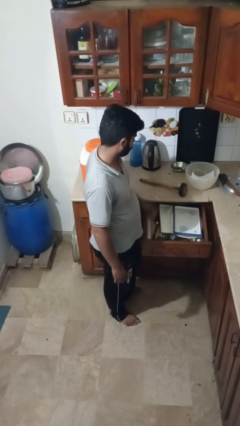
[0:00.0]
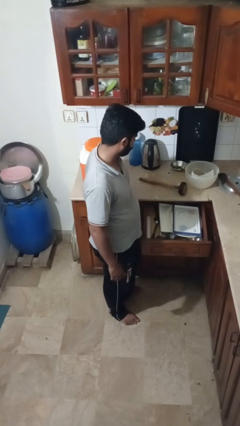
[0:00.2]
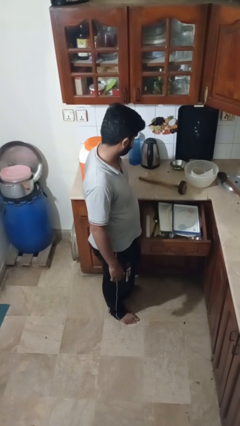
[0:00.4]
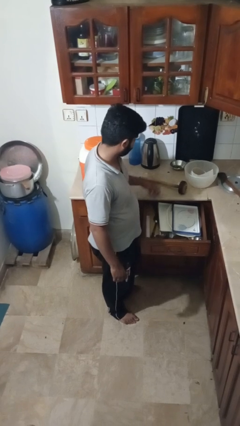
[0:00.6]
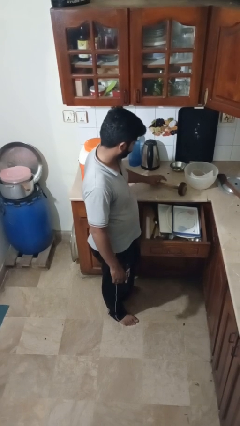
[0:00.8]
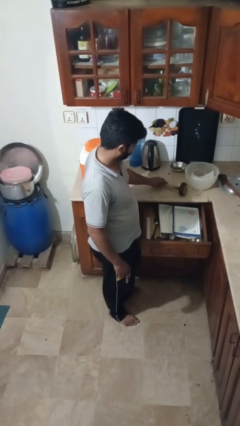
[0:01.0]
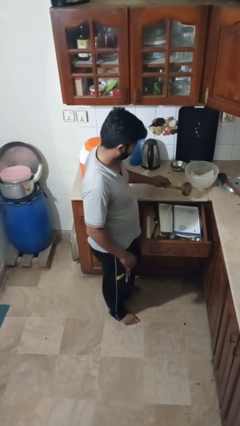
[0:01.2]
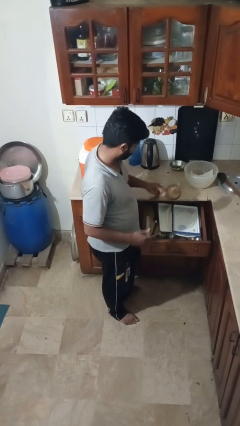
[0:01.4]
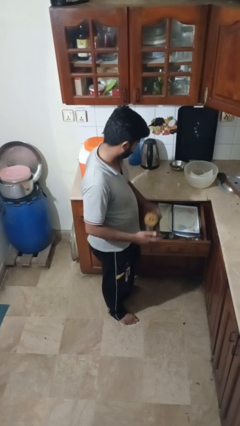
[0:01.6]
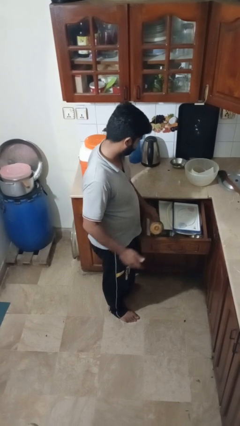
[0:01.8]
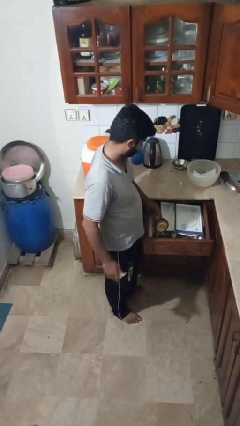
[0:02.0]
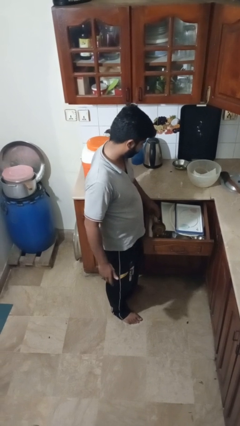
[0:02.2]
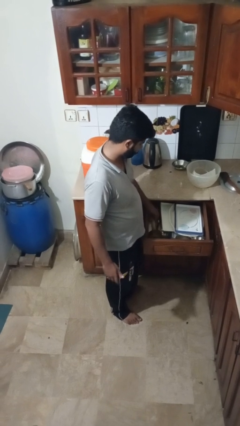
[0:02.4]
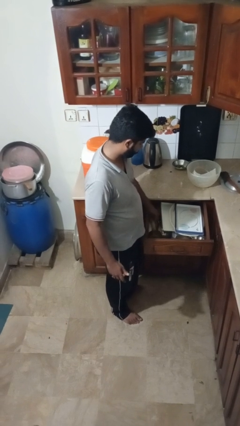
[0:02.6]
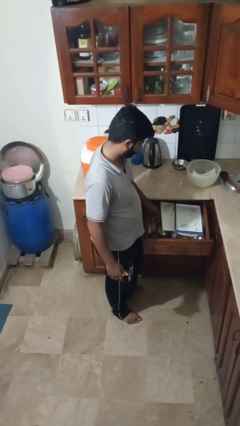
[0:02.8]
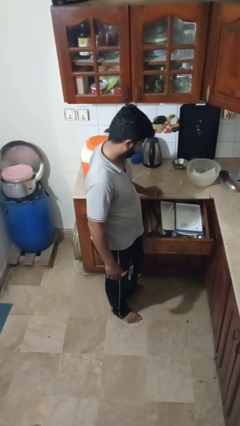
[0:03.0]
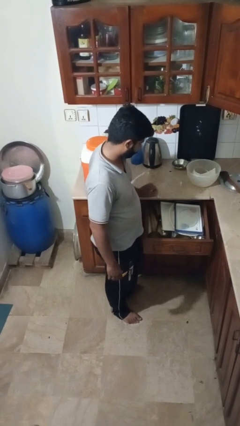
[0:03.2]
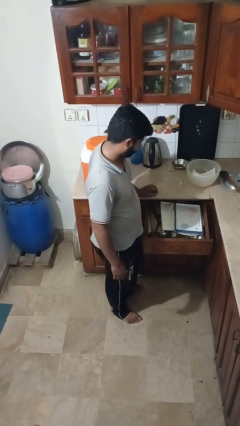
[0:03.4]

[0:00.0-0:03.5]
person puts object into kitchen drawer

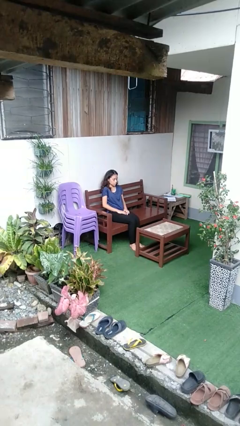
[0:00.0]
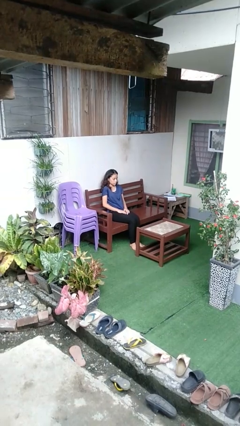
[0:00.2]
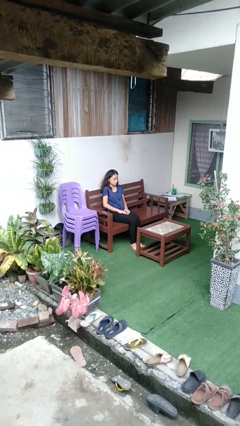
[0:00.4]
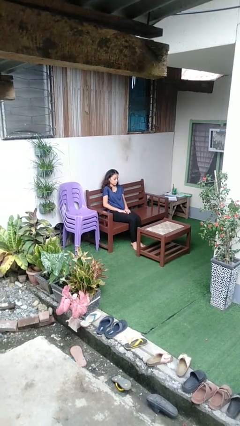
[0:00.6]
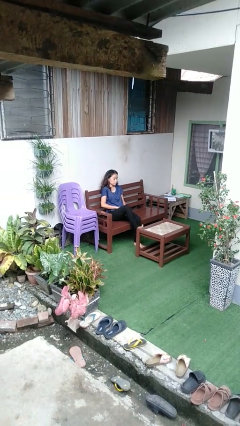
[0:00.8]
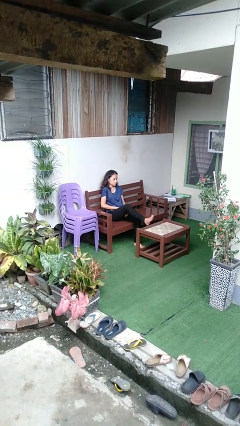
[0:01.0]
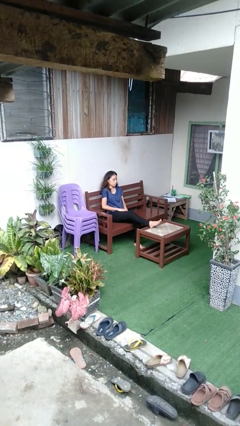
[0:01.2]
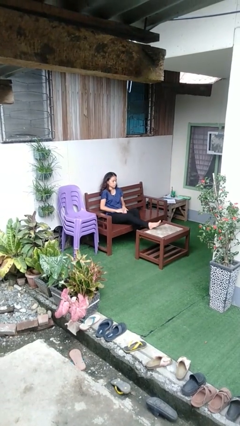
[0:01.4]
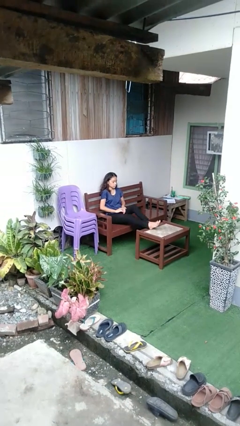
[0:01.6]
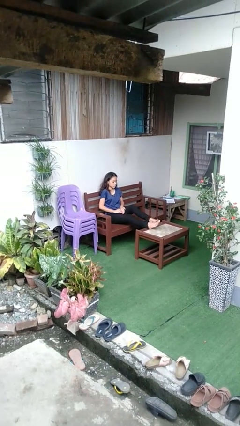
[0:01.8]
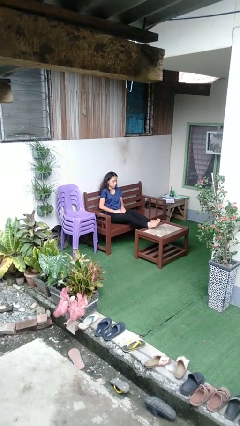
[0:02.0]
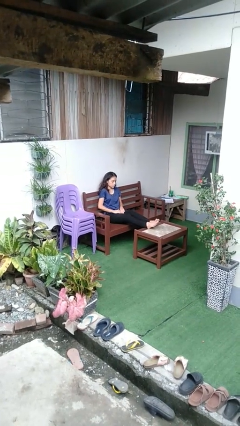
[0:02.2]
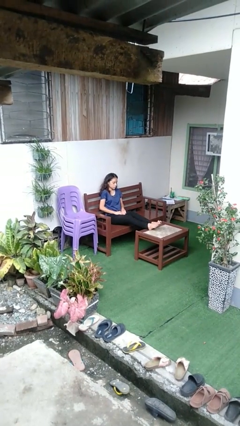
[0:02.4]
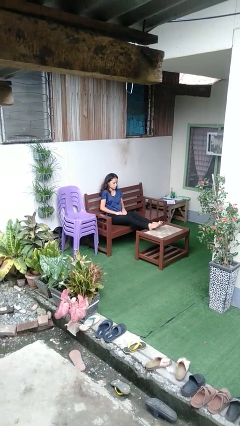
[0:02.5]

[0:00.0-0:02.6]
person puts feet up

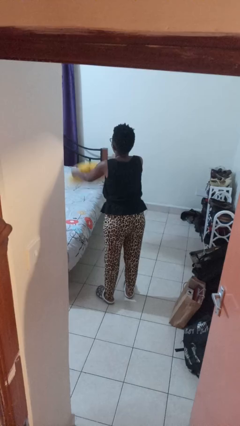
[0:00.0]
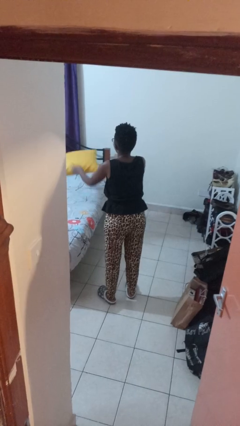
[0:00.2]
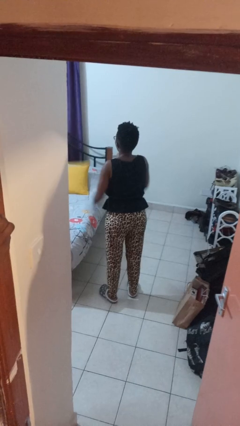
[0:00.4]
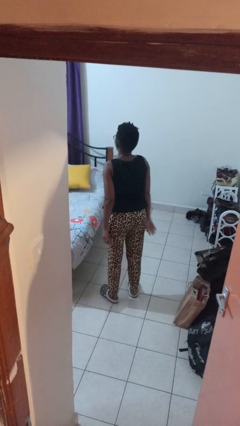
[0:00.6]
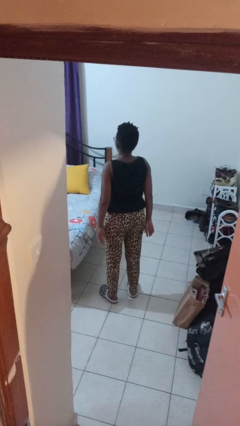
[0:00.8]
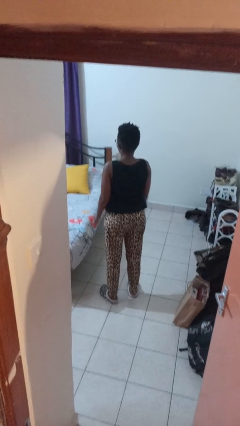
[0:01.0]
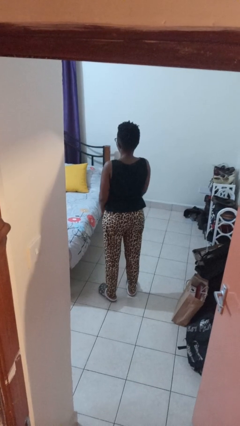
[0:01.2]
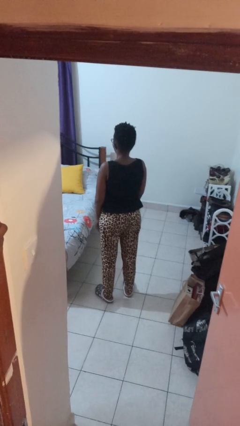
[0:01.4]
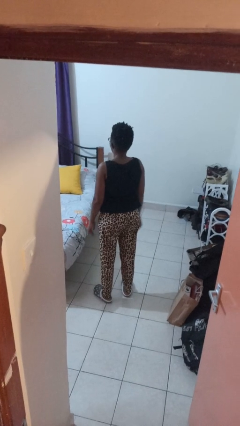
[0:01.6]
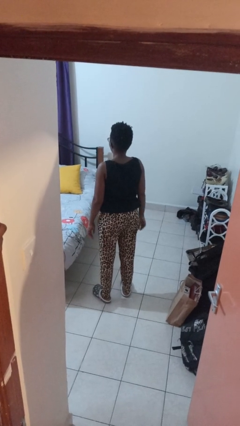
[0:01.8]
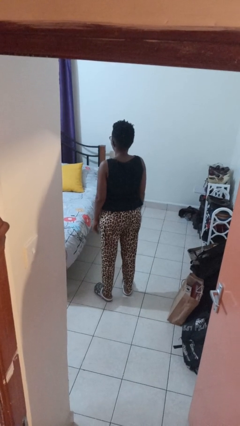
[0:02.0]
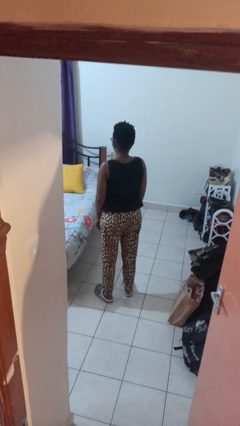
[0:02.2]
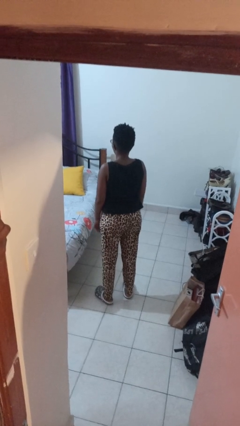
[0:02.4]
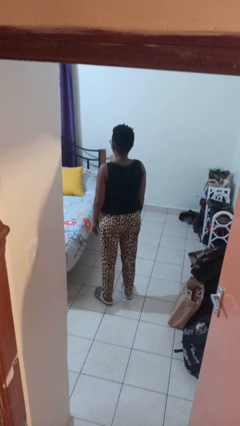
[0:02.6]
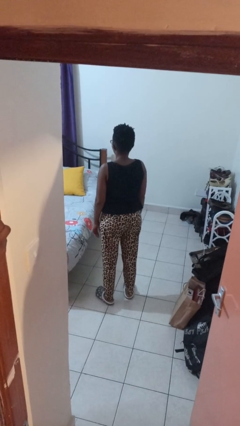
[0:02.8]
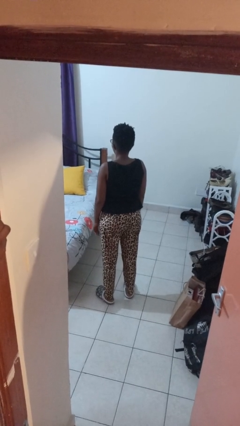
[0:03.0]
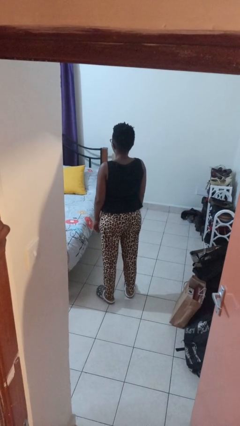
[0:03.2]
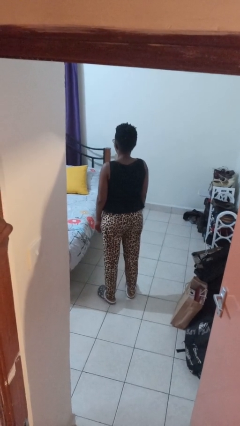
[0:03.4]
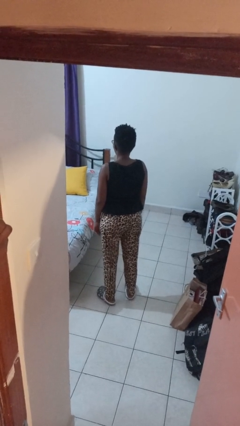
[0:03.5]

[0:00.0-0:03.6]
person throws object on bed

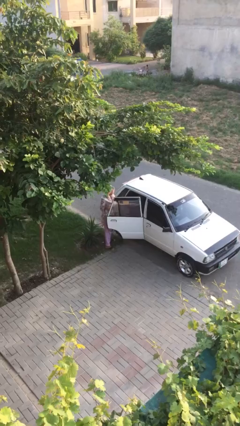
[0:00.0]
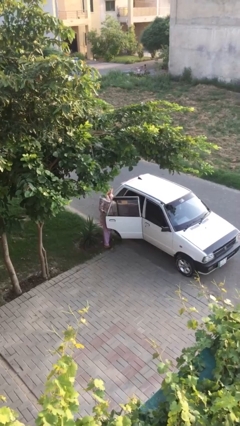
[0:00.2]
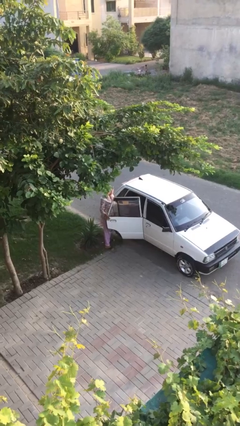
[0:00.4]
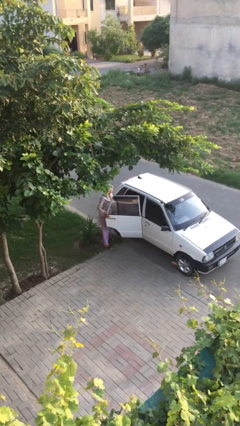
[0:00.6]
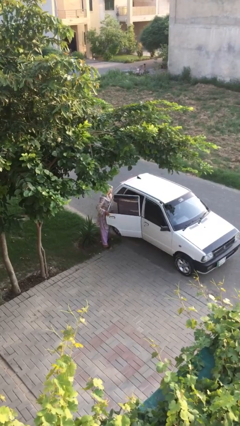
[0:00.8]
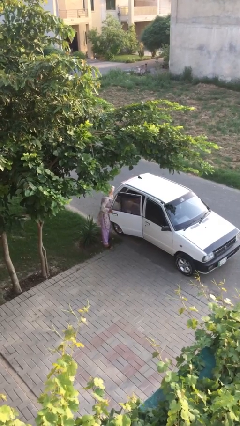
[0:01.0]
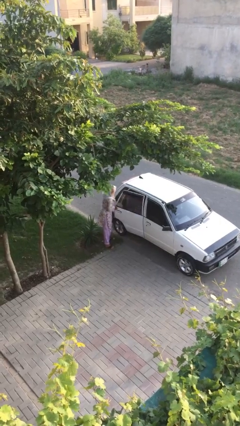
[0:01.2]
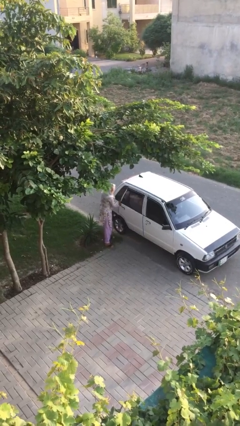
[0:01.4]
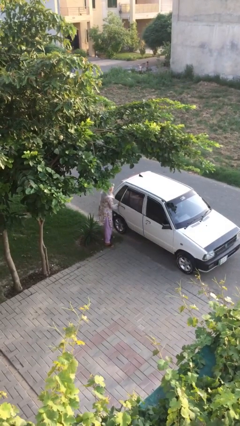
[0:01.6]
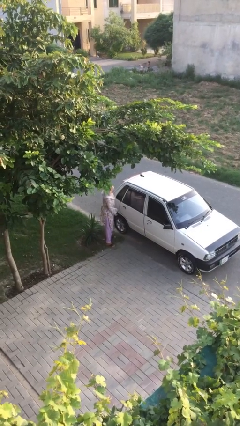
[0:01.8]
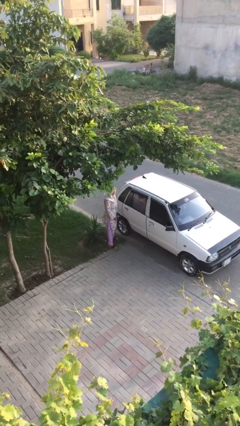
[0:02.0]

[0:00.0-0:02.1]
person closes car door

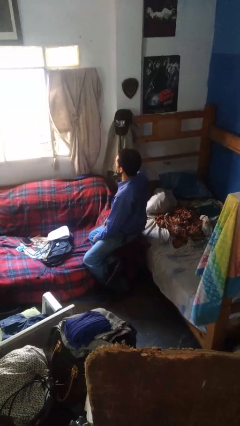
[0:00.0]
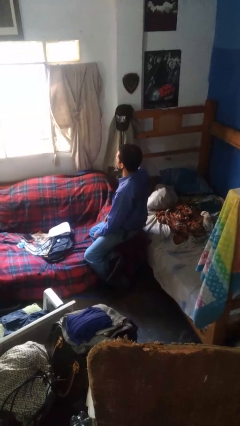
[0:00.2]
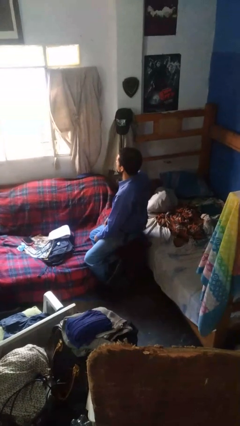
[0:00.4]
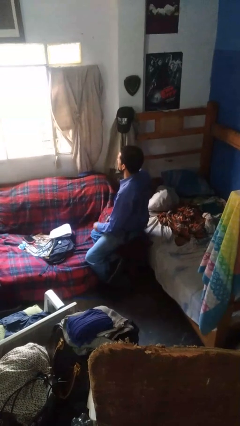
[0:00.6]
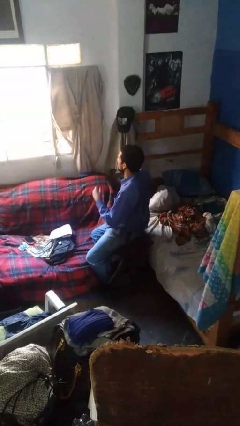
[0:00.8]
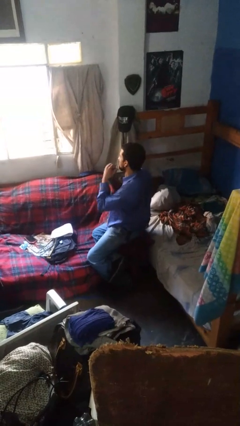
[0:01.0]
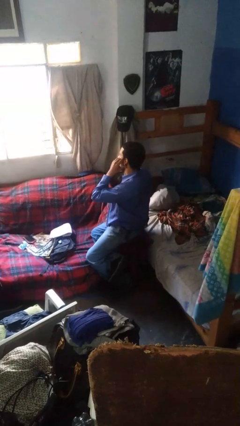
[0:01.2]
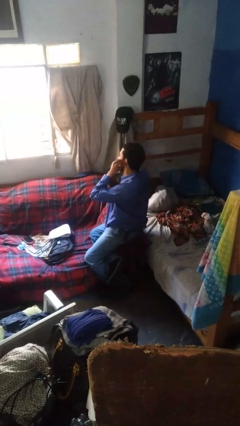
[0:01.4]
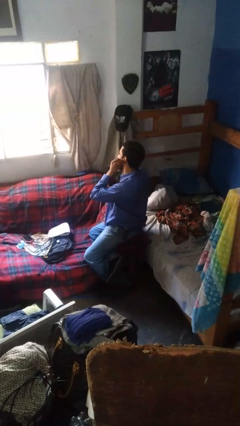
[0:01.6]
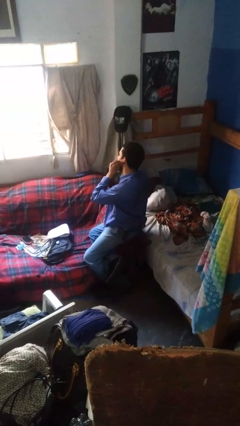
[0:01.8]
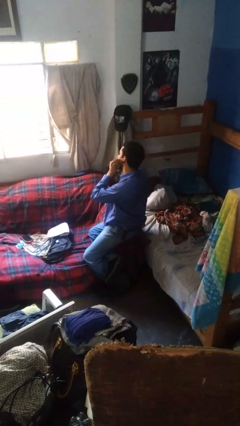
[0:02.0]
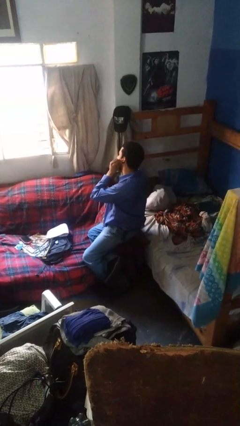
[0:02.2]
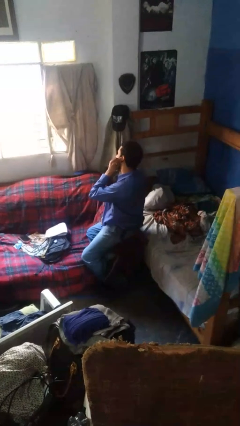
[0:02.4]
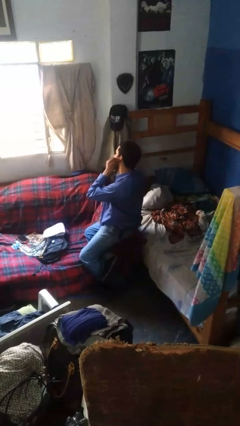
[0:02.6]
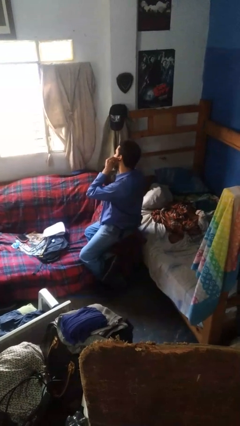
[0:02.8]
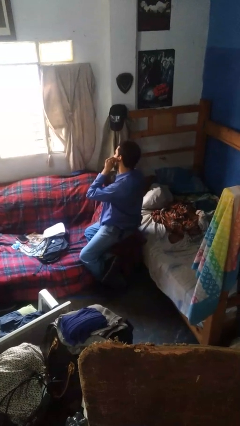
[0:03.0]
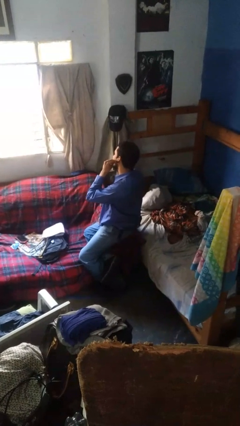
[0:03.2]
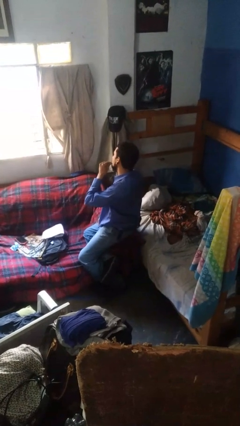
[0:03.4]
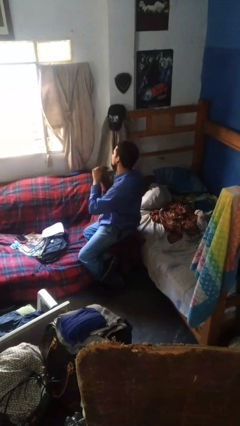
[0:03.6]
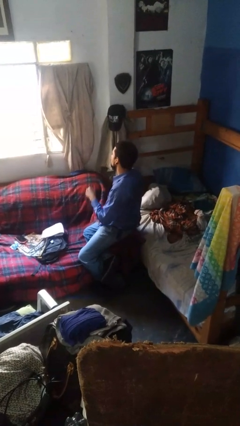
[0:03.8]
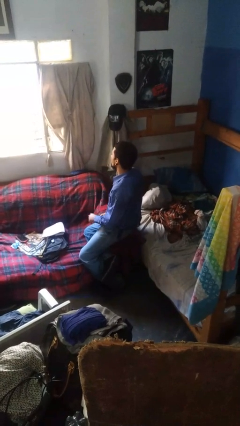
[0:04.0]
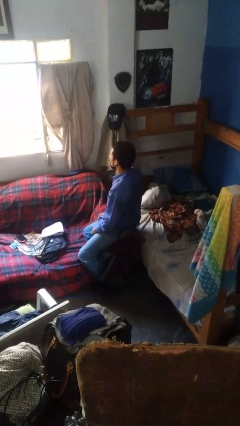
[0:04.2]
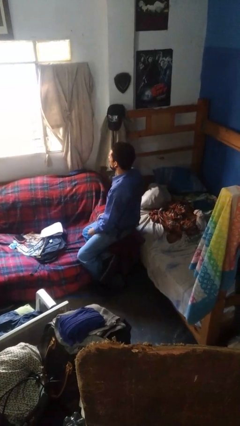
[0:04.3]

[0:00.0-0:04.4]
person touches earlobe

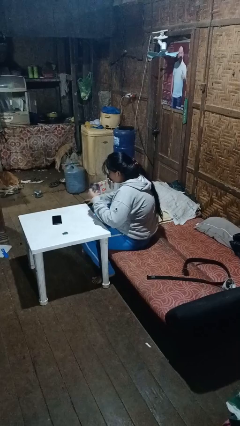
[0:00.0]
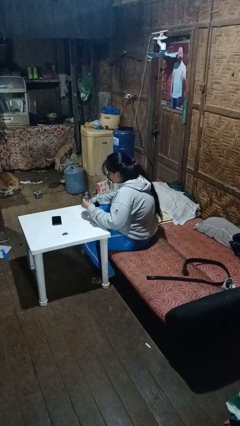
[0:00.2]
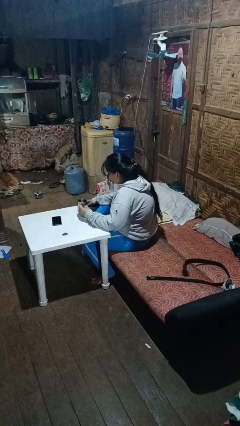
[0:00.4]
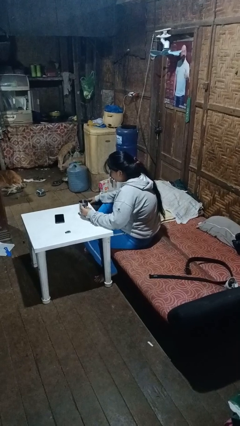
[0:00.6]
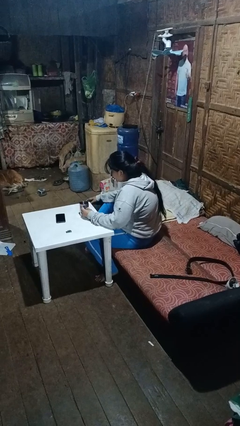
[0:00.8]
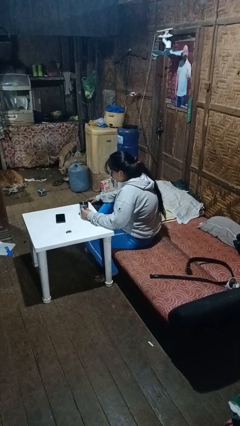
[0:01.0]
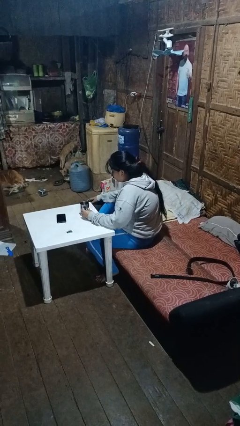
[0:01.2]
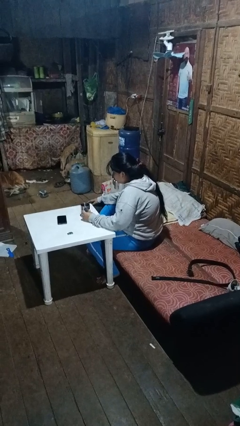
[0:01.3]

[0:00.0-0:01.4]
person puts down object on table

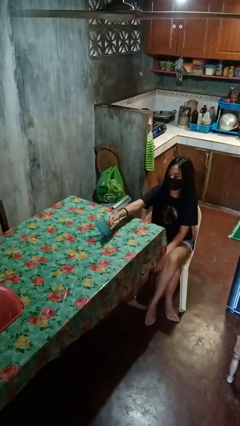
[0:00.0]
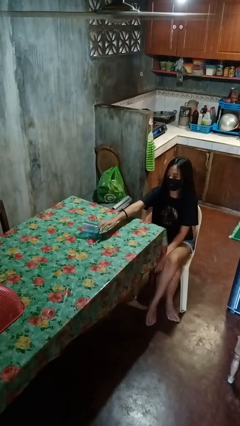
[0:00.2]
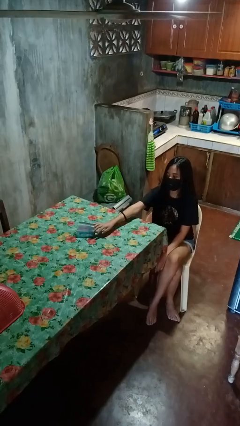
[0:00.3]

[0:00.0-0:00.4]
person knocks over glass
